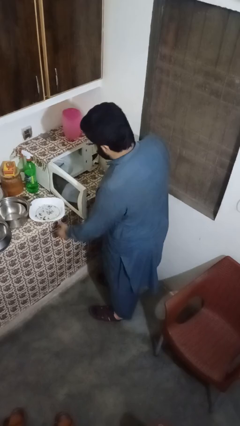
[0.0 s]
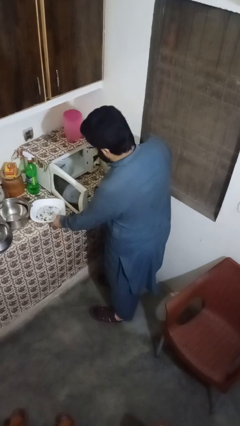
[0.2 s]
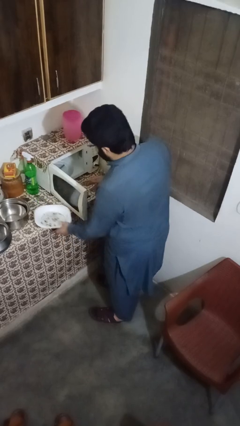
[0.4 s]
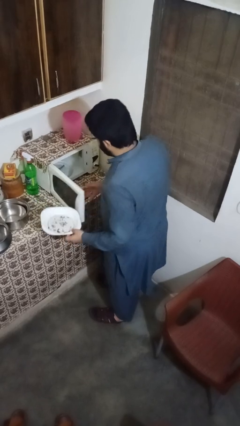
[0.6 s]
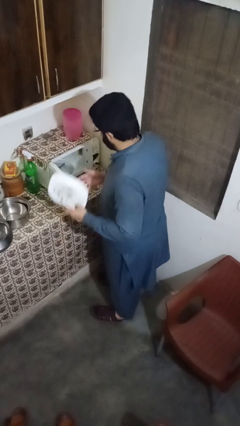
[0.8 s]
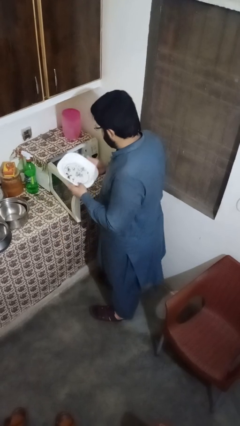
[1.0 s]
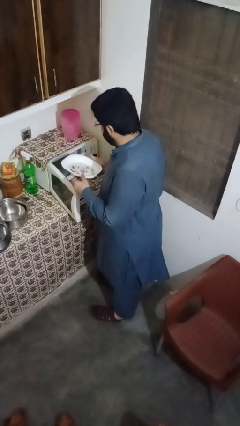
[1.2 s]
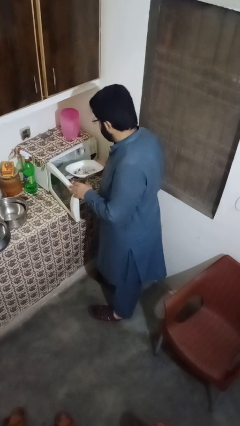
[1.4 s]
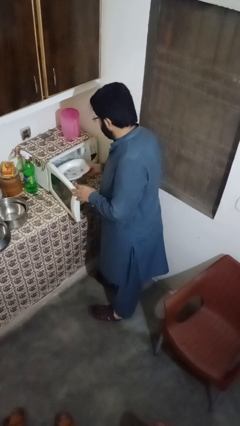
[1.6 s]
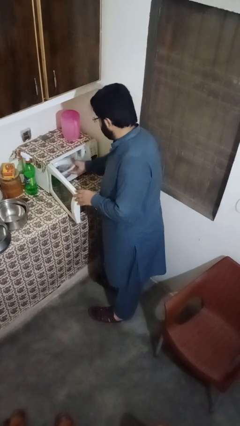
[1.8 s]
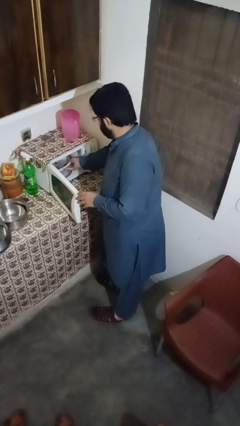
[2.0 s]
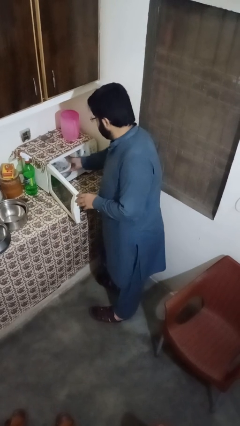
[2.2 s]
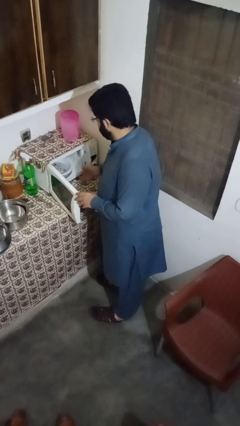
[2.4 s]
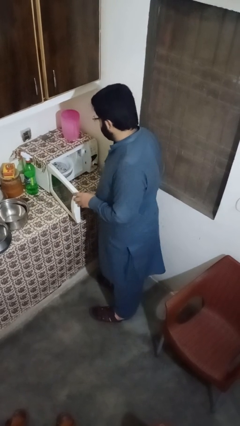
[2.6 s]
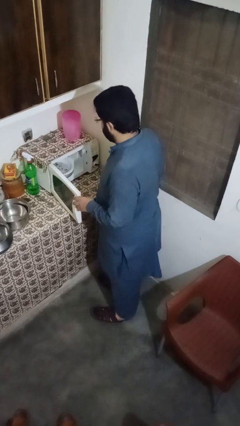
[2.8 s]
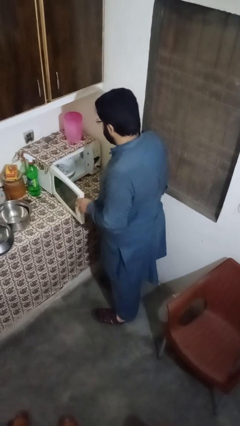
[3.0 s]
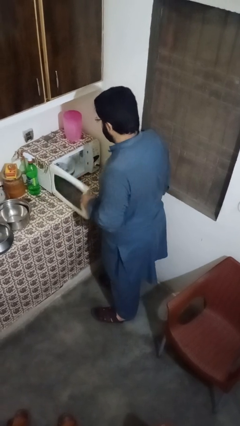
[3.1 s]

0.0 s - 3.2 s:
person puts object into microwave

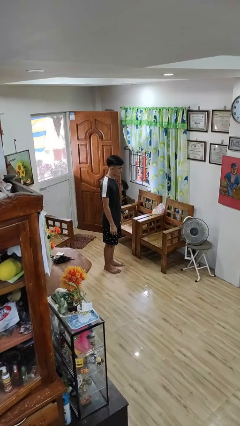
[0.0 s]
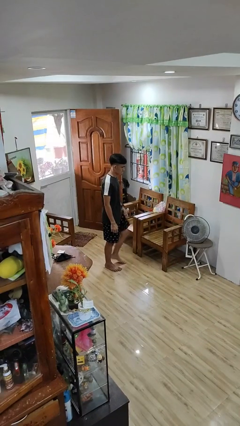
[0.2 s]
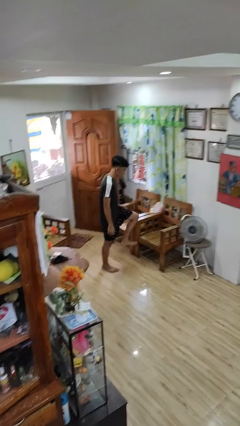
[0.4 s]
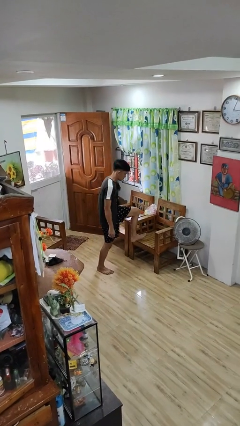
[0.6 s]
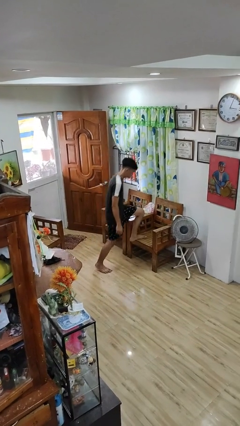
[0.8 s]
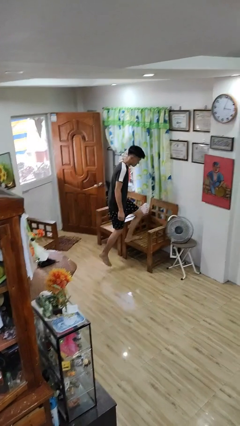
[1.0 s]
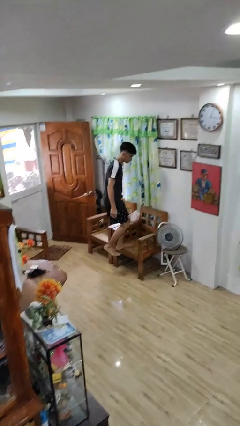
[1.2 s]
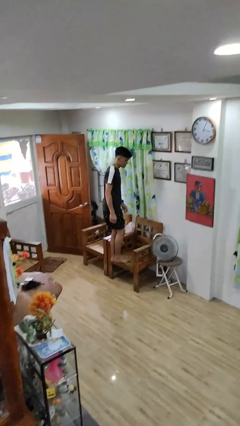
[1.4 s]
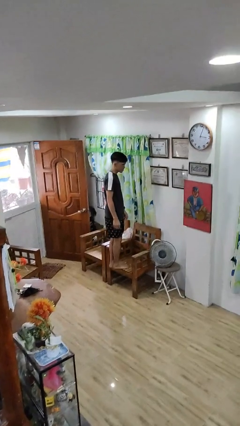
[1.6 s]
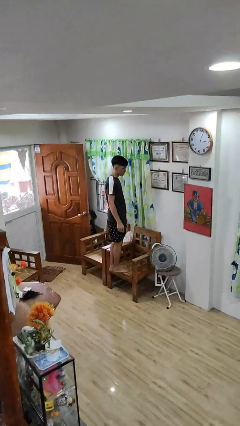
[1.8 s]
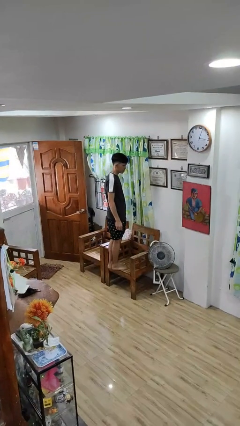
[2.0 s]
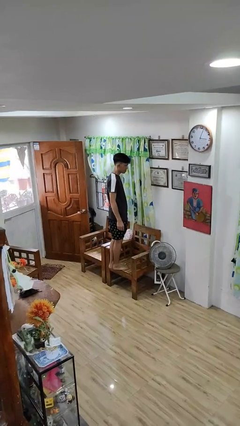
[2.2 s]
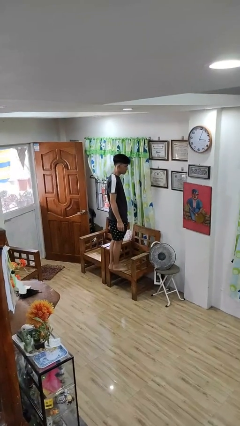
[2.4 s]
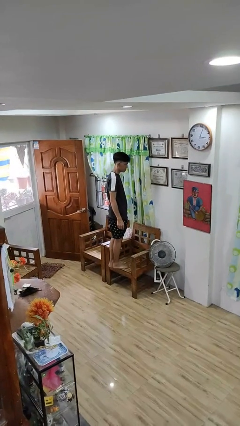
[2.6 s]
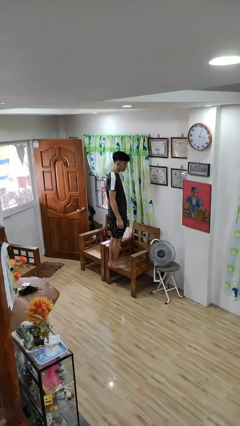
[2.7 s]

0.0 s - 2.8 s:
person climbs on chair

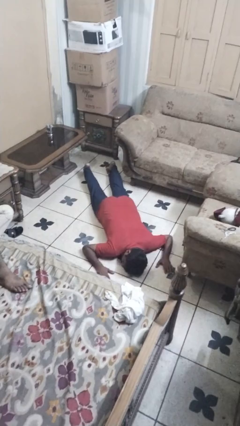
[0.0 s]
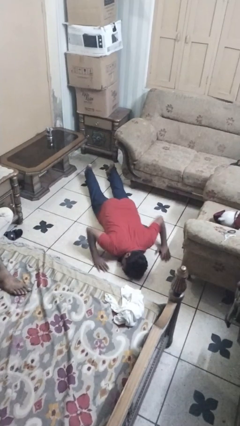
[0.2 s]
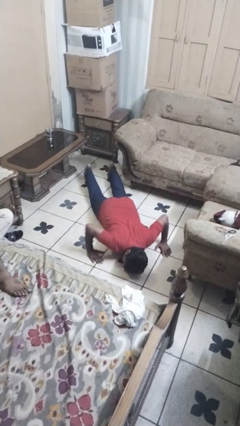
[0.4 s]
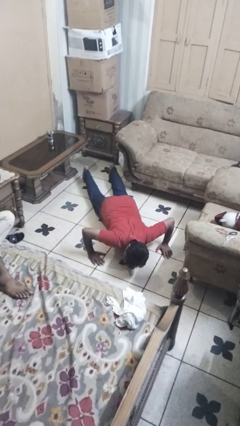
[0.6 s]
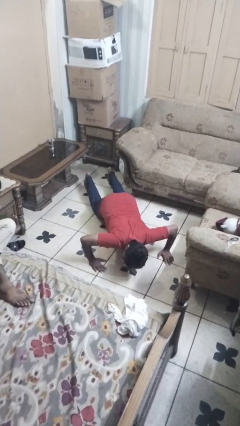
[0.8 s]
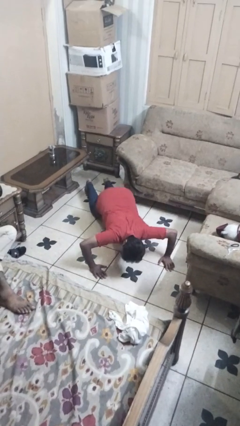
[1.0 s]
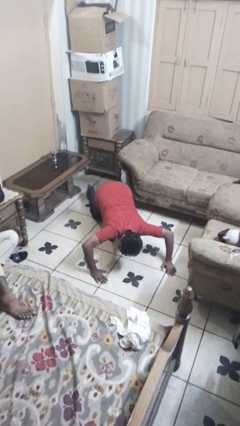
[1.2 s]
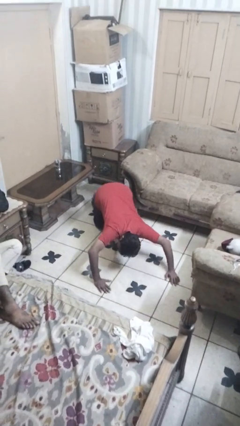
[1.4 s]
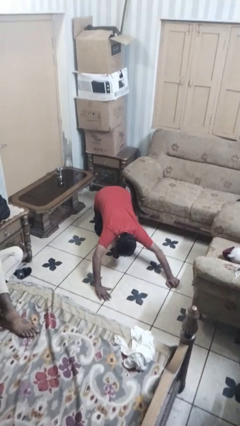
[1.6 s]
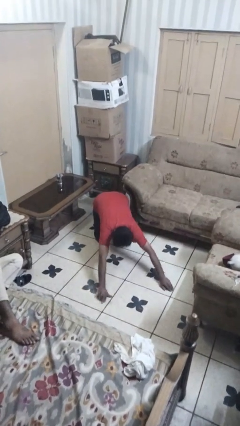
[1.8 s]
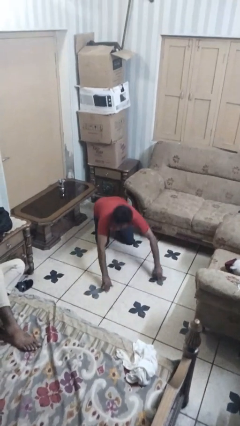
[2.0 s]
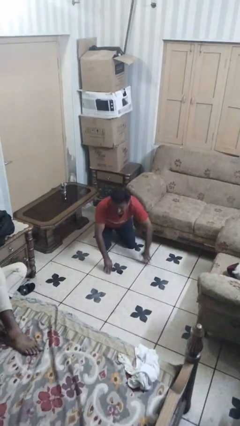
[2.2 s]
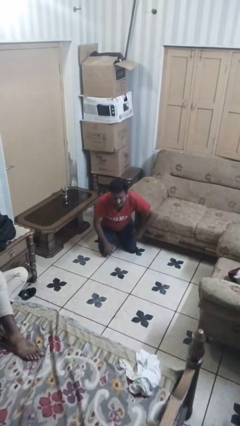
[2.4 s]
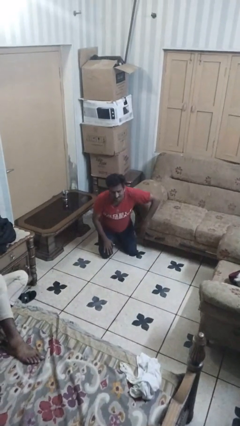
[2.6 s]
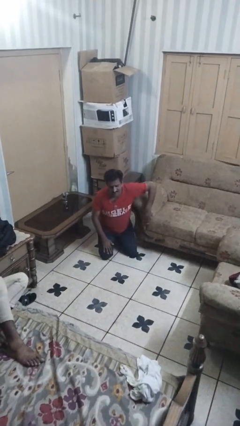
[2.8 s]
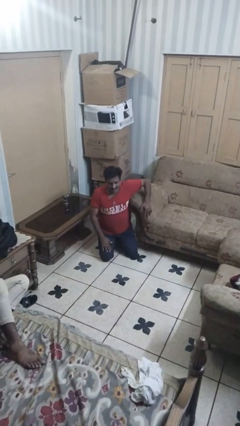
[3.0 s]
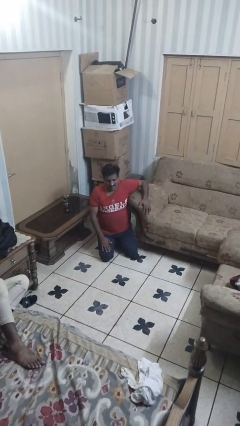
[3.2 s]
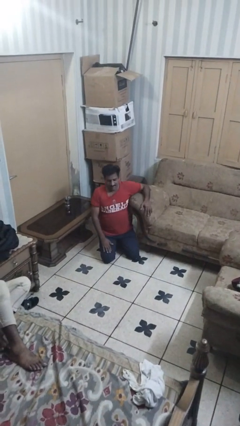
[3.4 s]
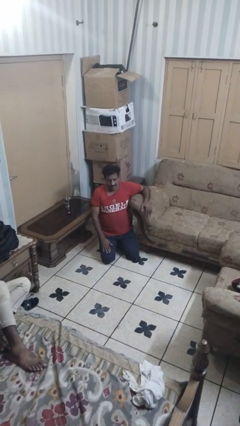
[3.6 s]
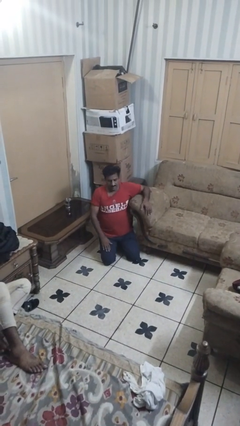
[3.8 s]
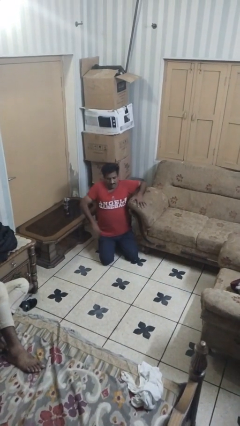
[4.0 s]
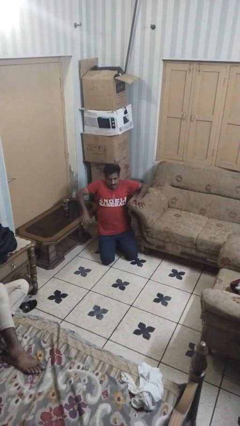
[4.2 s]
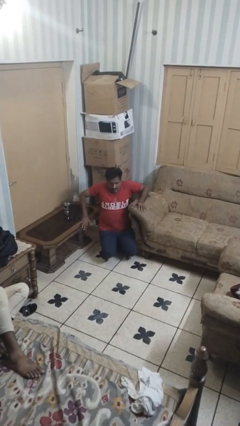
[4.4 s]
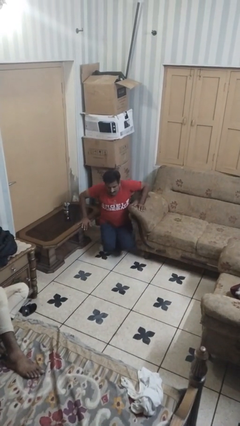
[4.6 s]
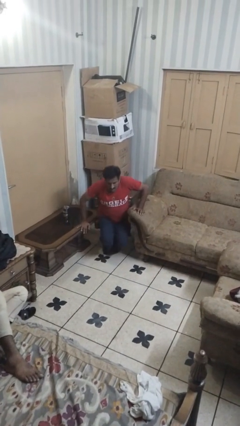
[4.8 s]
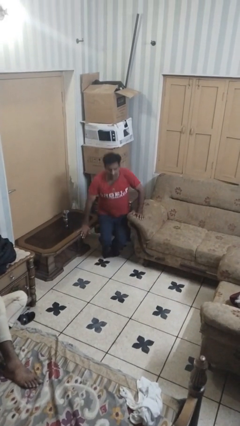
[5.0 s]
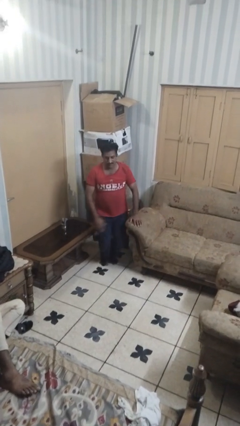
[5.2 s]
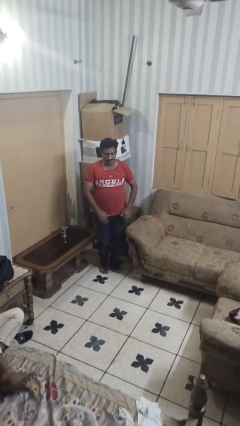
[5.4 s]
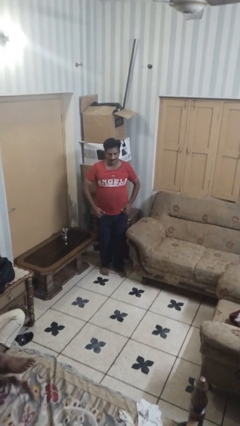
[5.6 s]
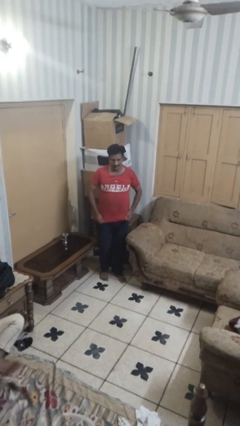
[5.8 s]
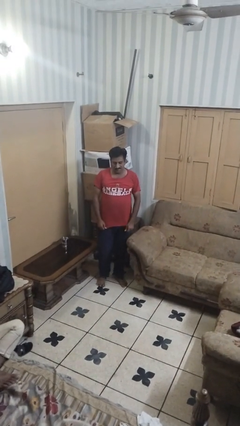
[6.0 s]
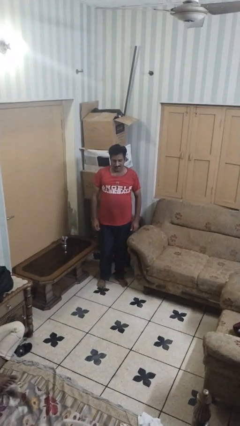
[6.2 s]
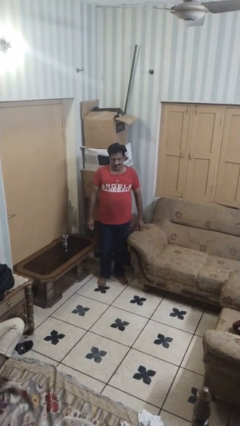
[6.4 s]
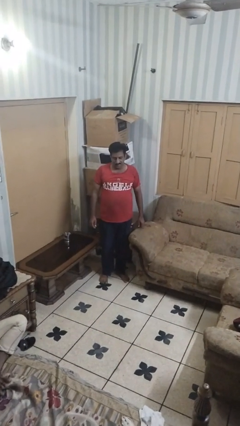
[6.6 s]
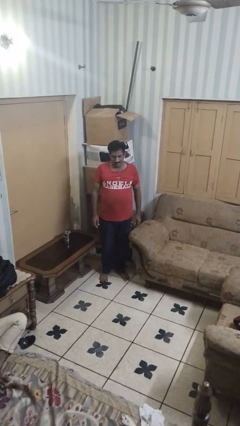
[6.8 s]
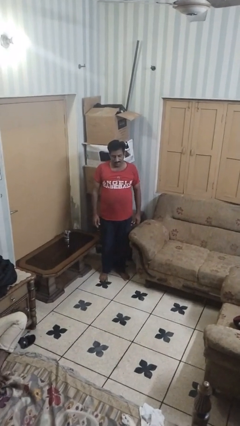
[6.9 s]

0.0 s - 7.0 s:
person stands up from floor

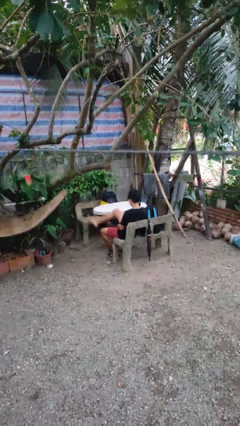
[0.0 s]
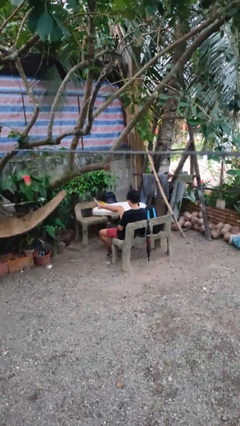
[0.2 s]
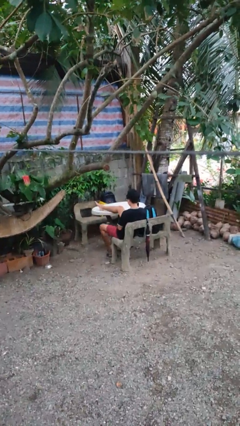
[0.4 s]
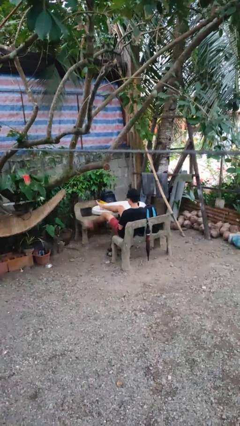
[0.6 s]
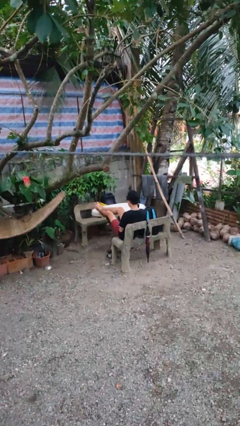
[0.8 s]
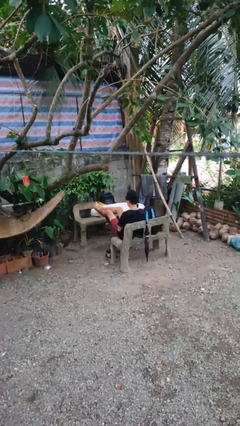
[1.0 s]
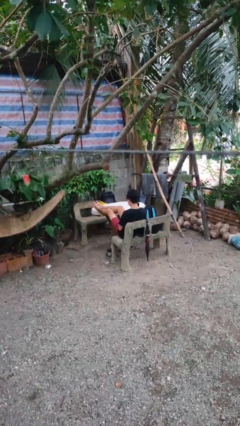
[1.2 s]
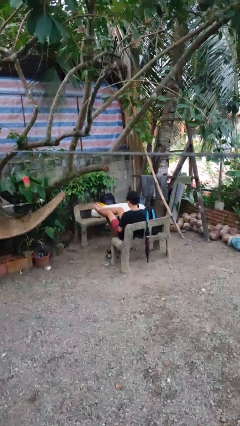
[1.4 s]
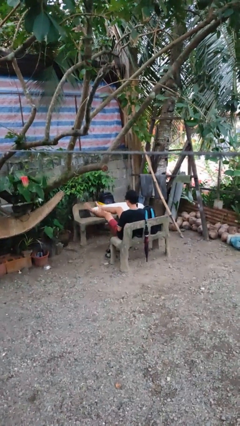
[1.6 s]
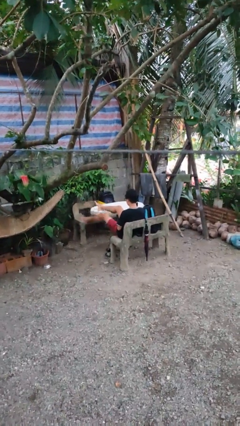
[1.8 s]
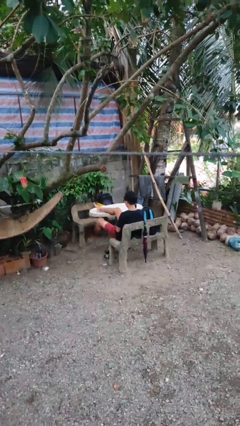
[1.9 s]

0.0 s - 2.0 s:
person puts feet up

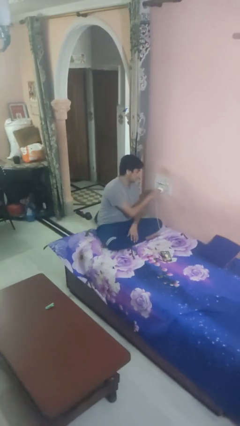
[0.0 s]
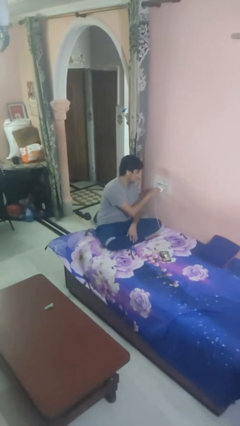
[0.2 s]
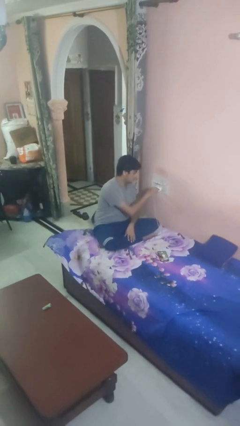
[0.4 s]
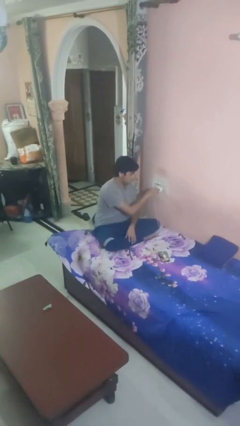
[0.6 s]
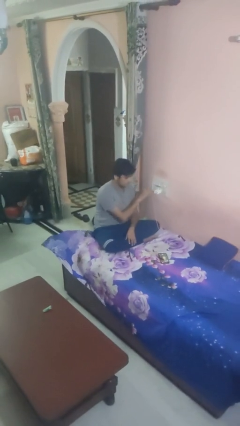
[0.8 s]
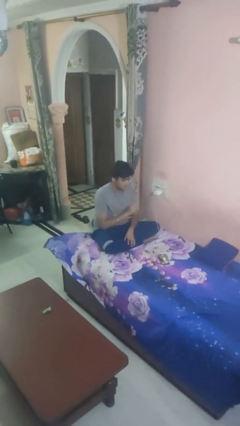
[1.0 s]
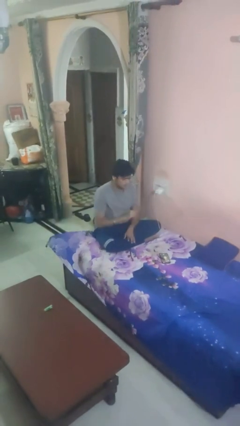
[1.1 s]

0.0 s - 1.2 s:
person plugs into electrical socket

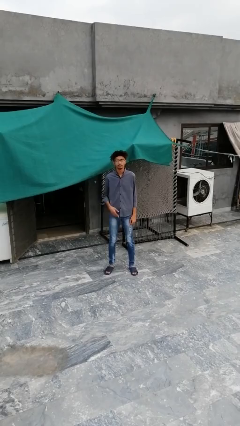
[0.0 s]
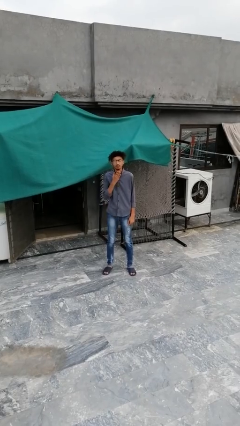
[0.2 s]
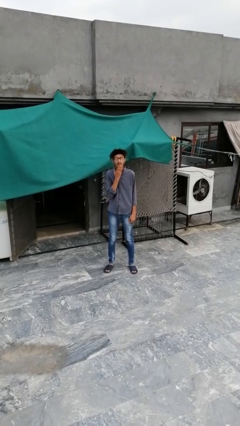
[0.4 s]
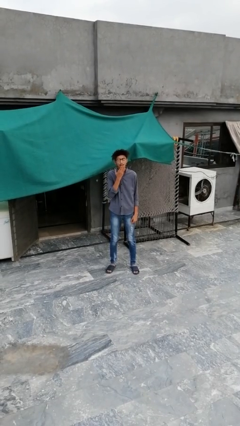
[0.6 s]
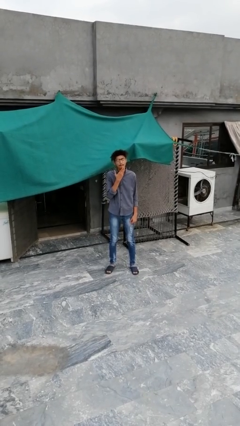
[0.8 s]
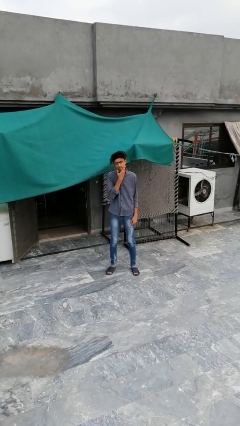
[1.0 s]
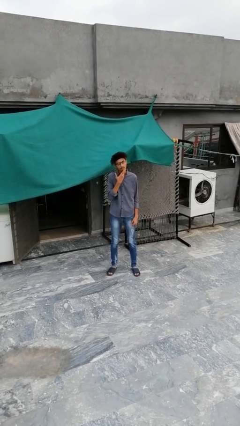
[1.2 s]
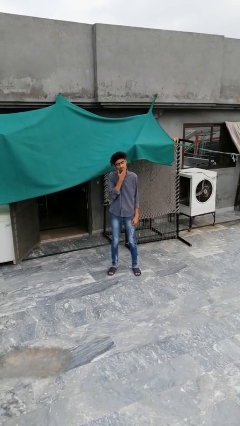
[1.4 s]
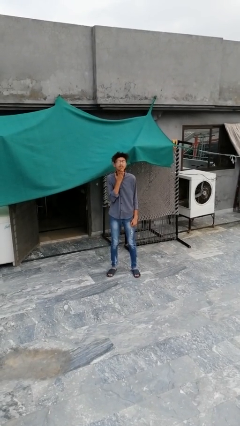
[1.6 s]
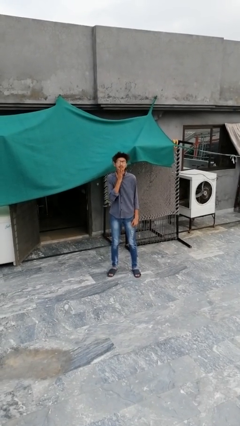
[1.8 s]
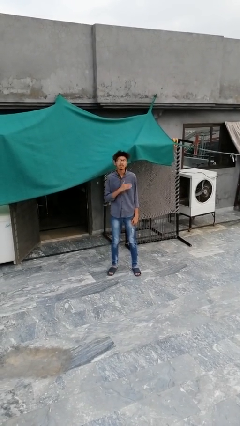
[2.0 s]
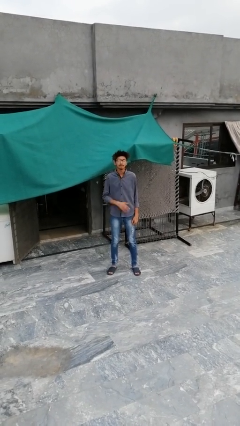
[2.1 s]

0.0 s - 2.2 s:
person strokes chin
